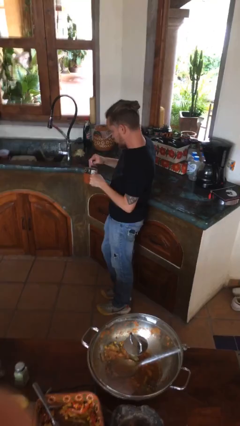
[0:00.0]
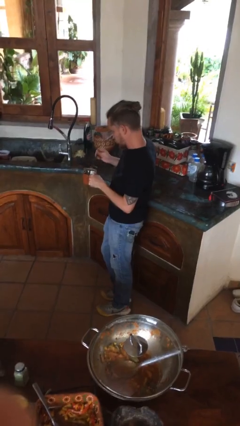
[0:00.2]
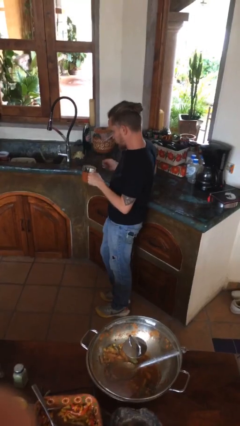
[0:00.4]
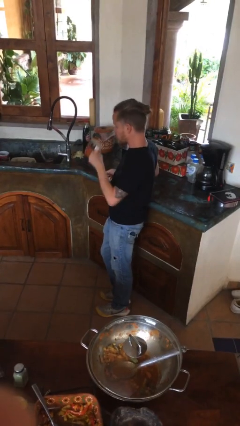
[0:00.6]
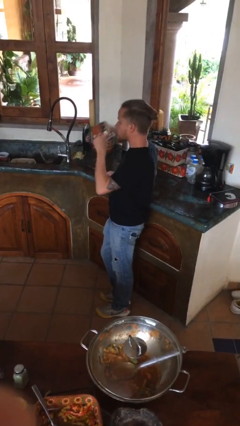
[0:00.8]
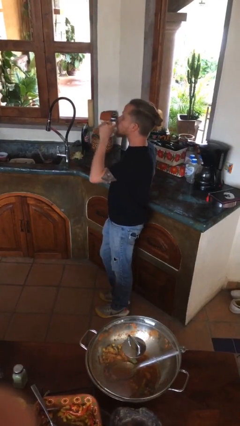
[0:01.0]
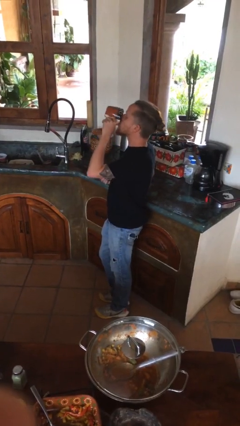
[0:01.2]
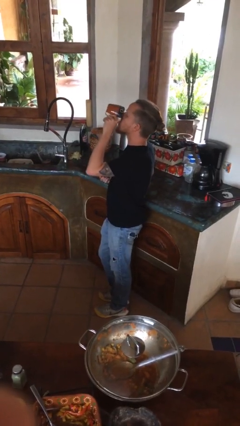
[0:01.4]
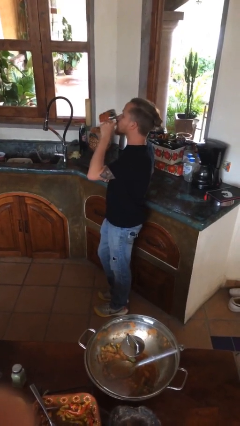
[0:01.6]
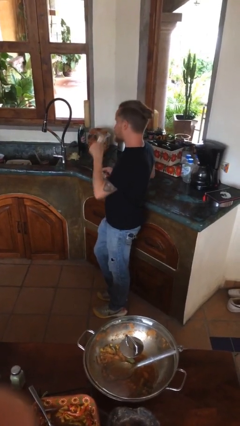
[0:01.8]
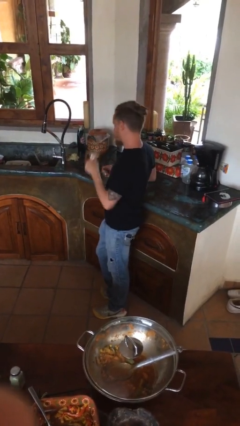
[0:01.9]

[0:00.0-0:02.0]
person drinks from mug

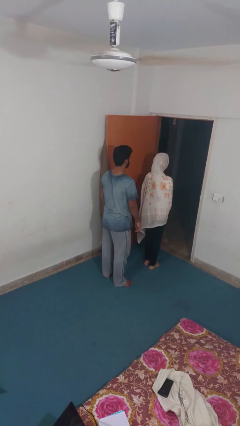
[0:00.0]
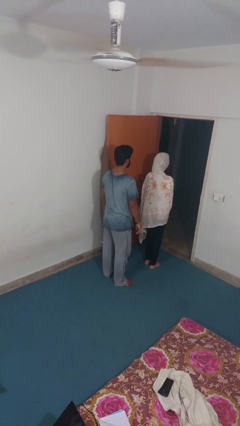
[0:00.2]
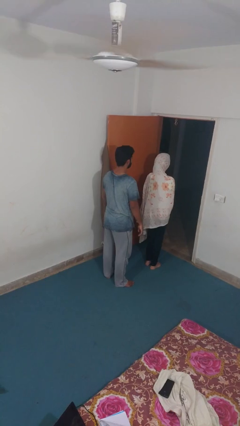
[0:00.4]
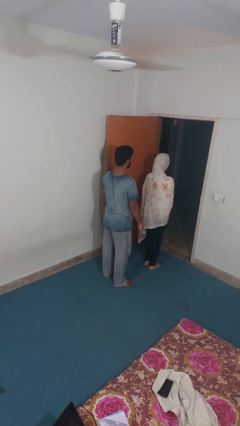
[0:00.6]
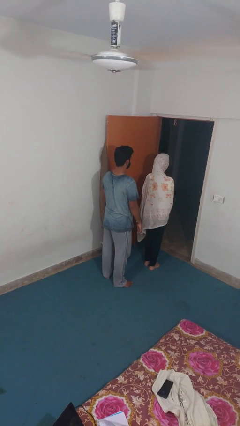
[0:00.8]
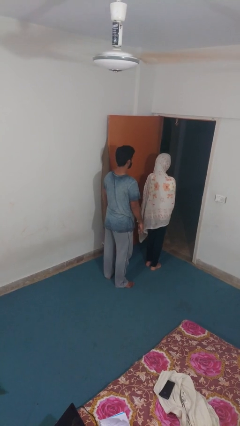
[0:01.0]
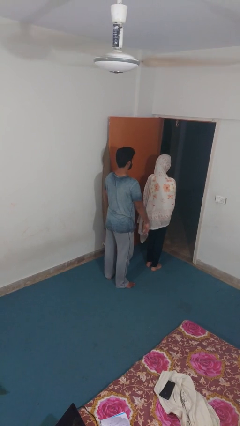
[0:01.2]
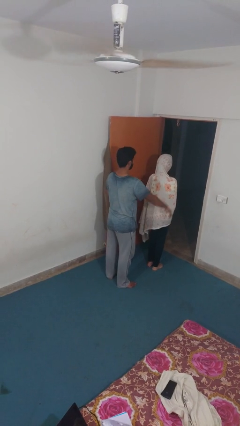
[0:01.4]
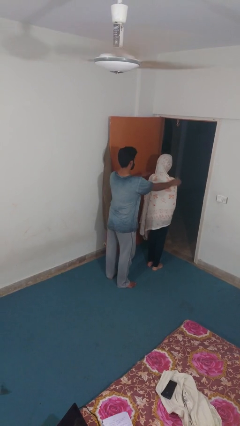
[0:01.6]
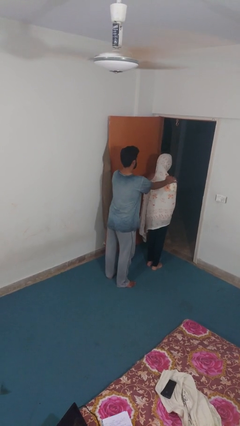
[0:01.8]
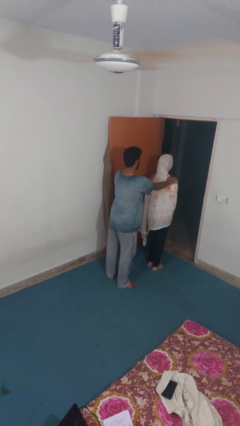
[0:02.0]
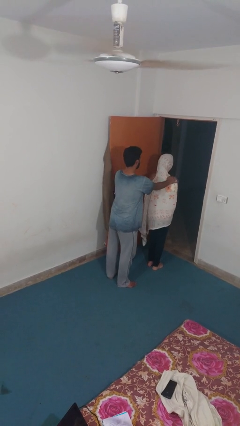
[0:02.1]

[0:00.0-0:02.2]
person grabs person by shoulder

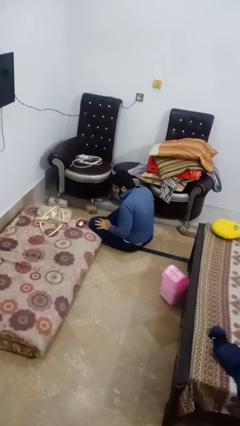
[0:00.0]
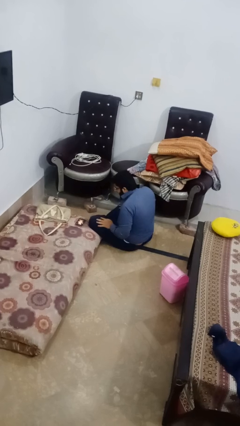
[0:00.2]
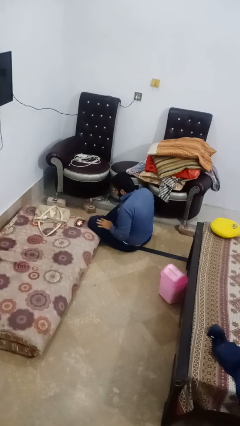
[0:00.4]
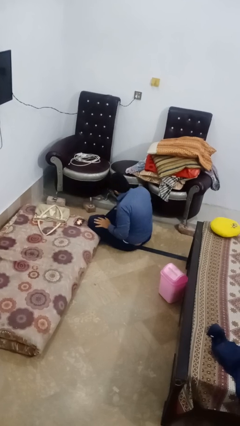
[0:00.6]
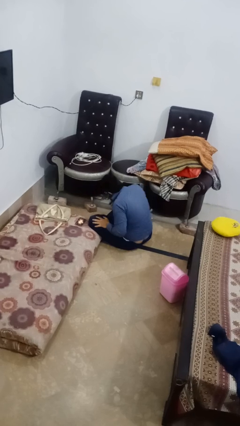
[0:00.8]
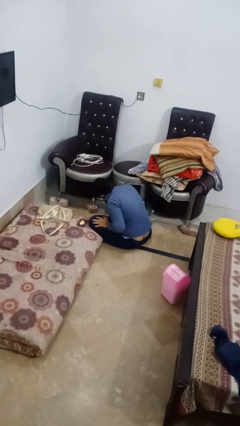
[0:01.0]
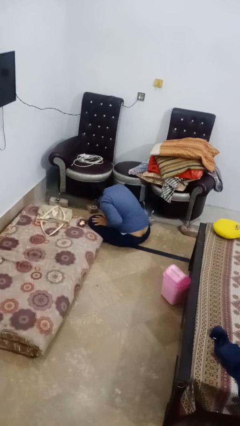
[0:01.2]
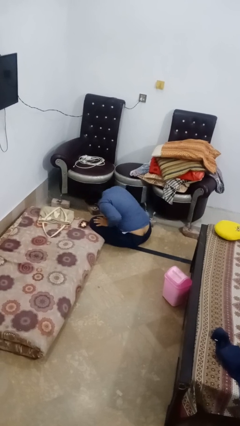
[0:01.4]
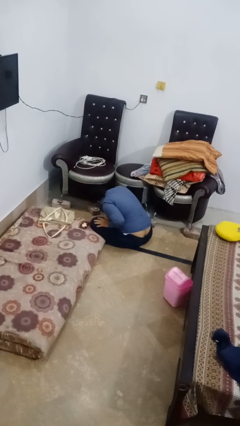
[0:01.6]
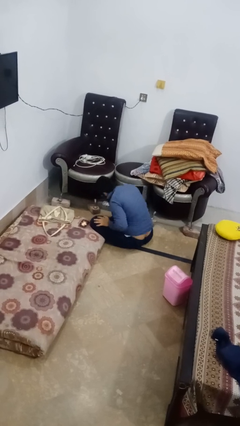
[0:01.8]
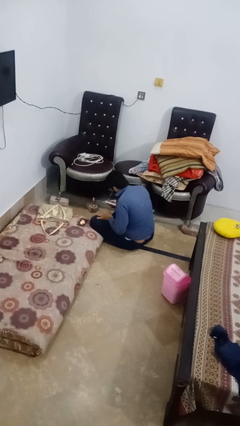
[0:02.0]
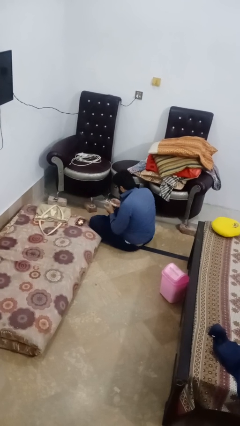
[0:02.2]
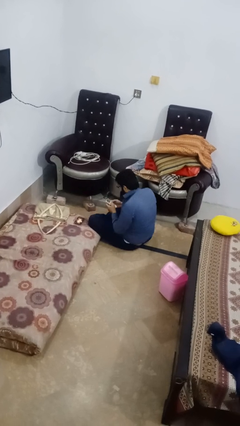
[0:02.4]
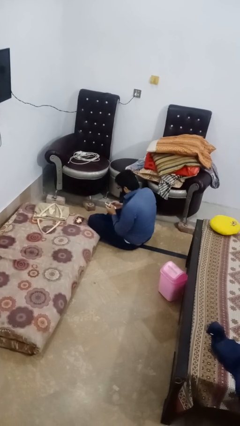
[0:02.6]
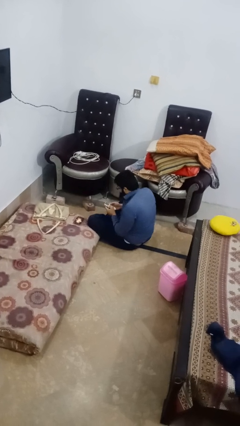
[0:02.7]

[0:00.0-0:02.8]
person searches under couch

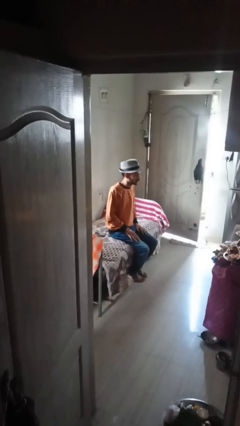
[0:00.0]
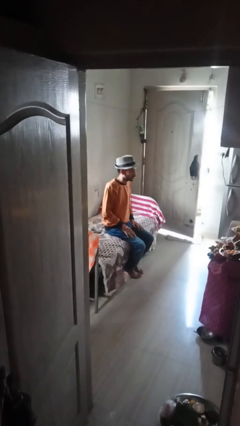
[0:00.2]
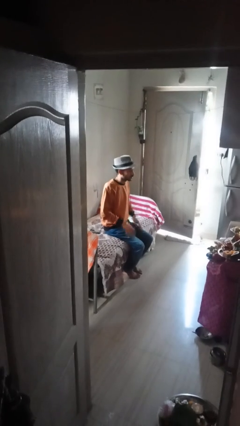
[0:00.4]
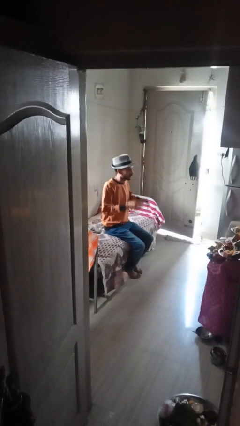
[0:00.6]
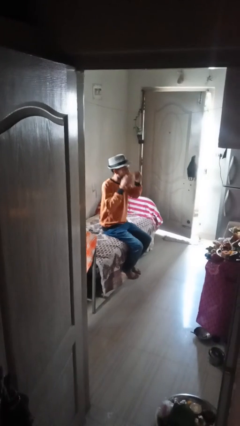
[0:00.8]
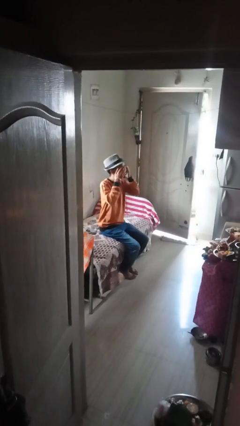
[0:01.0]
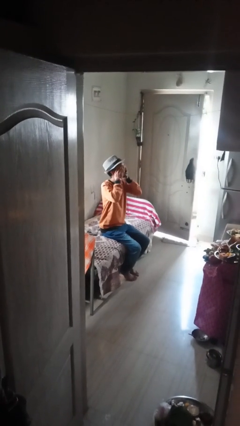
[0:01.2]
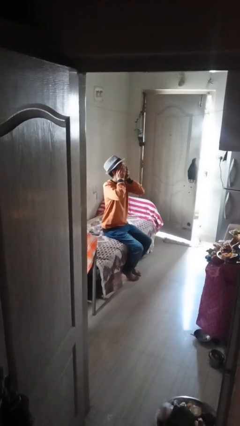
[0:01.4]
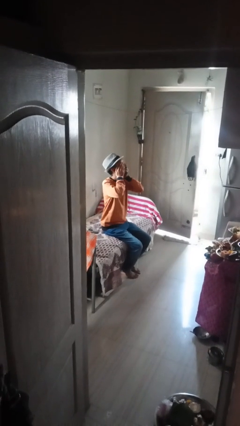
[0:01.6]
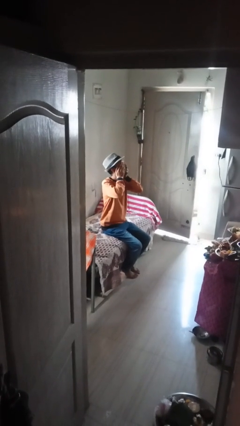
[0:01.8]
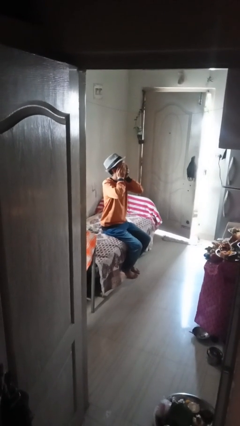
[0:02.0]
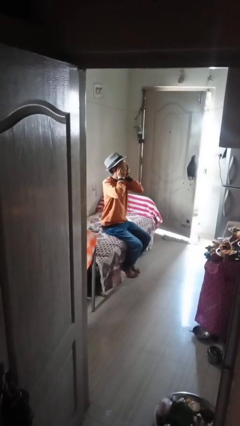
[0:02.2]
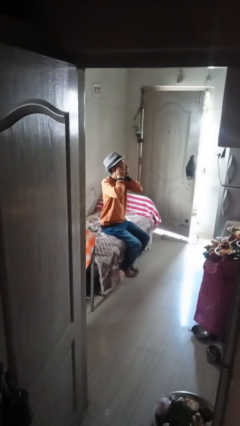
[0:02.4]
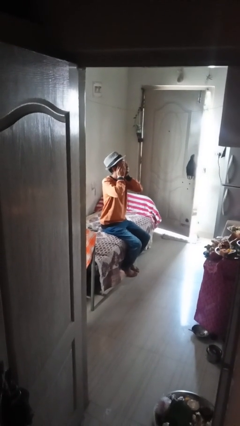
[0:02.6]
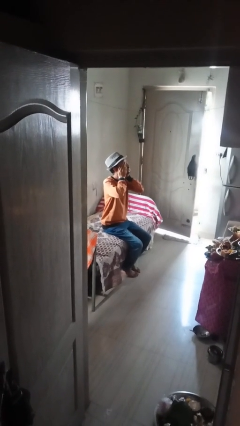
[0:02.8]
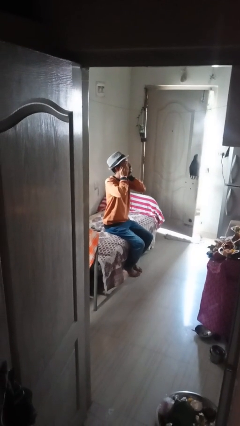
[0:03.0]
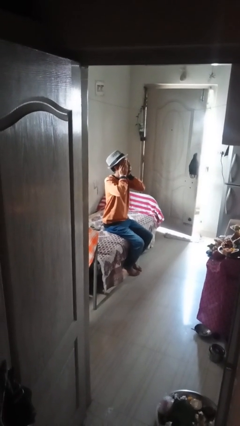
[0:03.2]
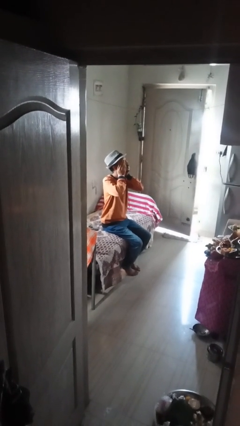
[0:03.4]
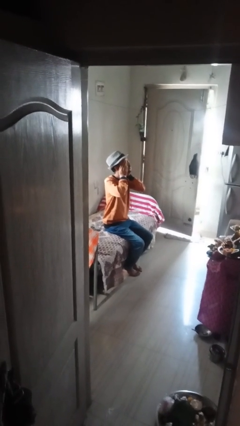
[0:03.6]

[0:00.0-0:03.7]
person covers face with hands

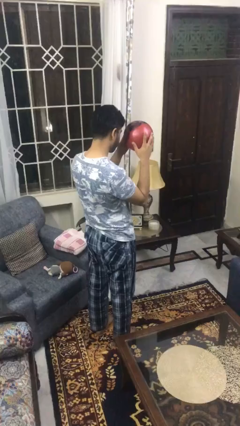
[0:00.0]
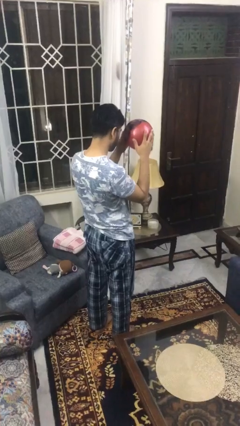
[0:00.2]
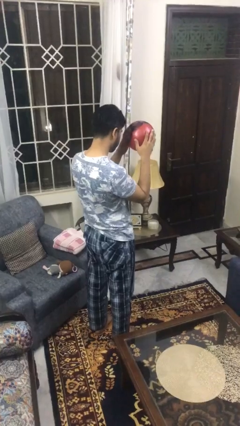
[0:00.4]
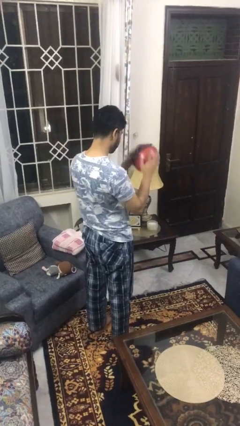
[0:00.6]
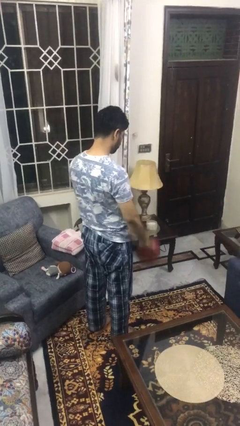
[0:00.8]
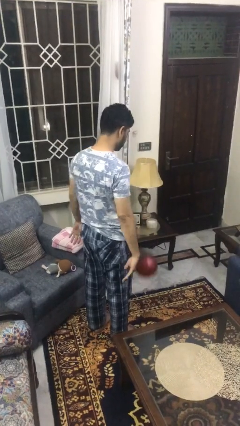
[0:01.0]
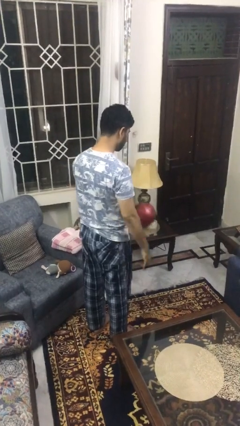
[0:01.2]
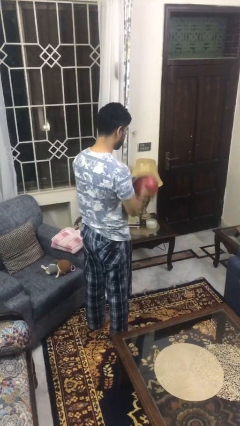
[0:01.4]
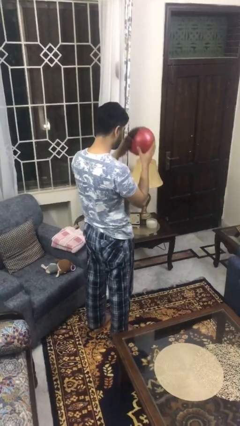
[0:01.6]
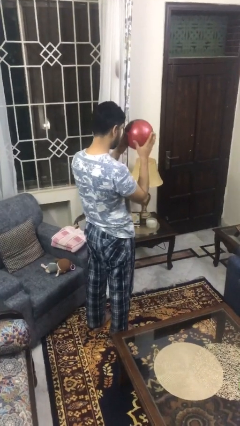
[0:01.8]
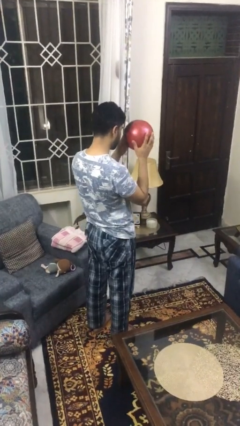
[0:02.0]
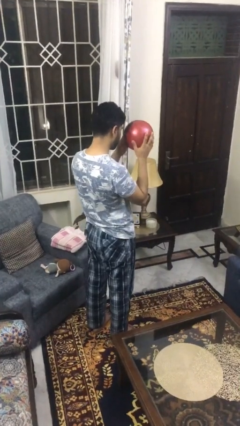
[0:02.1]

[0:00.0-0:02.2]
person bounces ball on floor

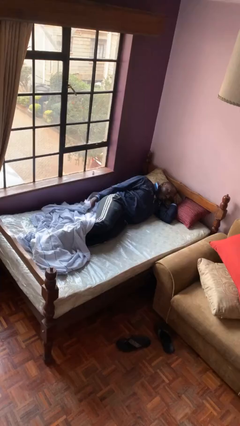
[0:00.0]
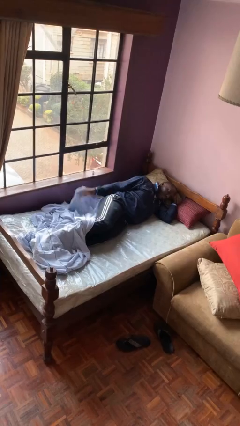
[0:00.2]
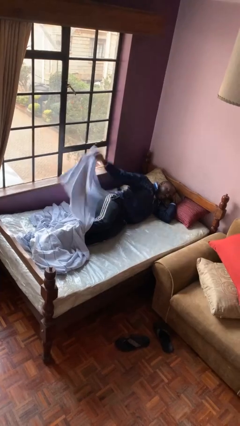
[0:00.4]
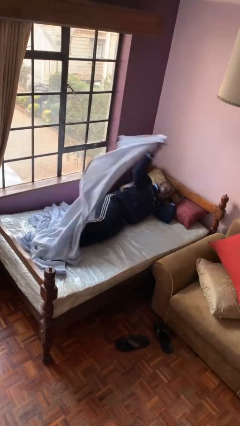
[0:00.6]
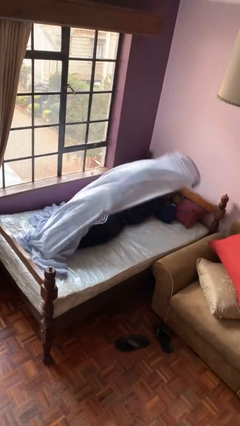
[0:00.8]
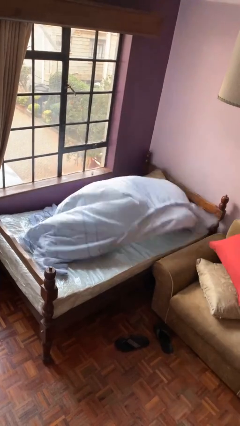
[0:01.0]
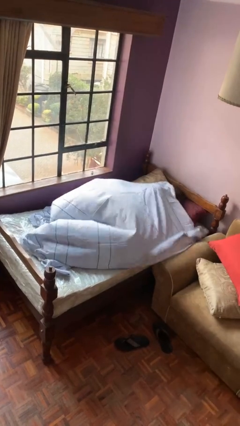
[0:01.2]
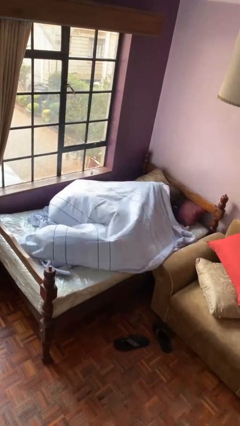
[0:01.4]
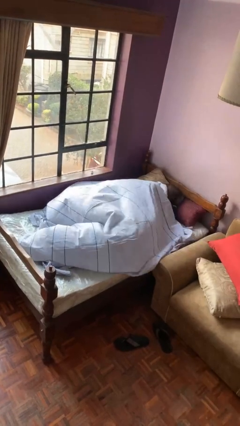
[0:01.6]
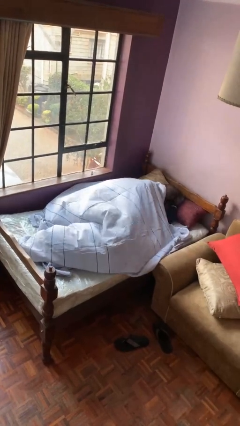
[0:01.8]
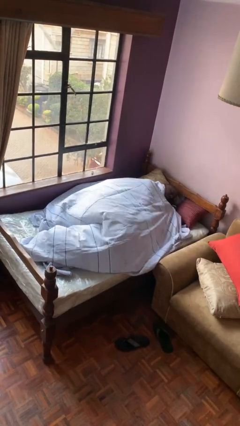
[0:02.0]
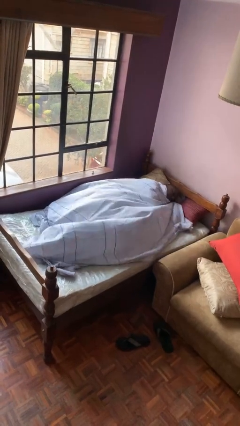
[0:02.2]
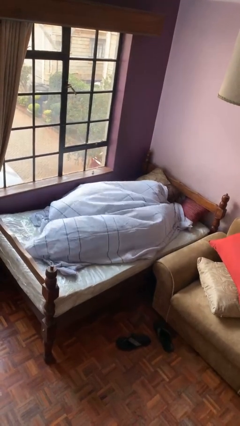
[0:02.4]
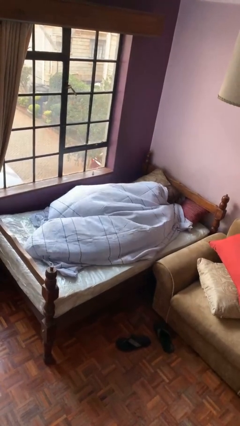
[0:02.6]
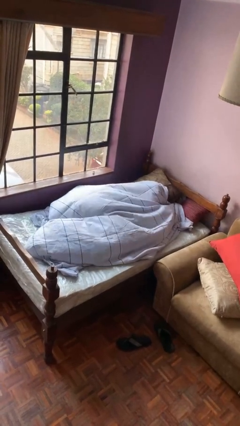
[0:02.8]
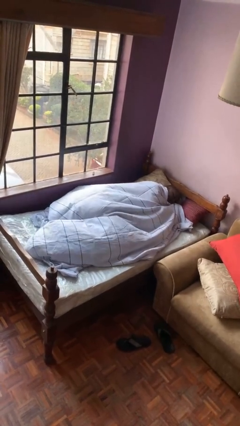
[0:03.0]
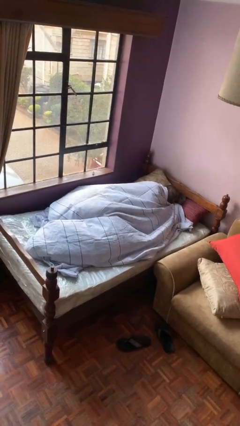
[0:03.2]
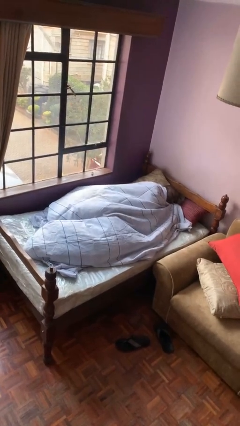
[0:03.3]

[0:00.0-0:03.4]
person covers with bedsheets

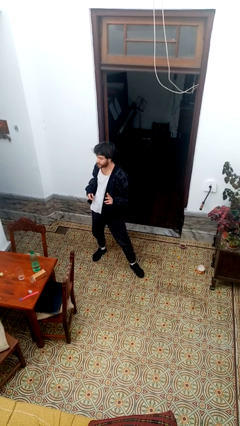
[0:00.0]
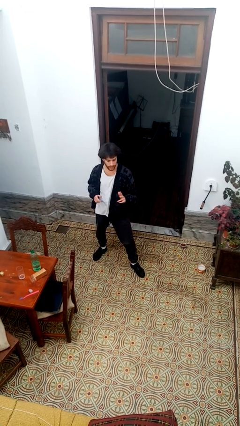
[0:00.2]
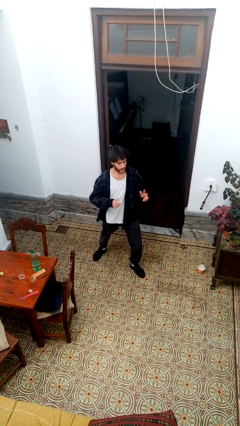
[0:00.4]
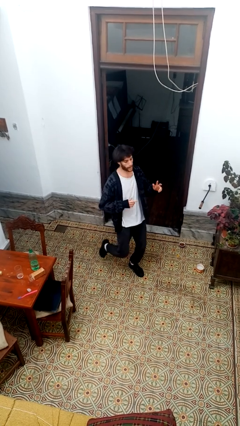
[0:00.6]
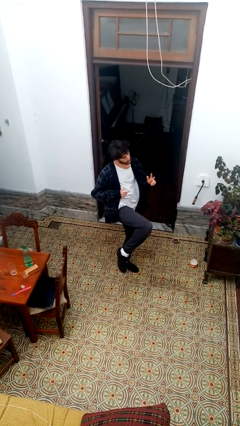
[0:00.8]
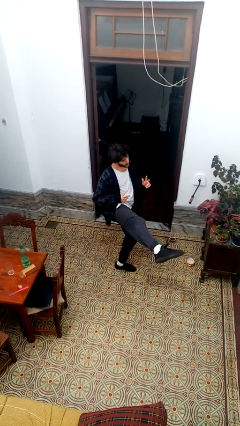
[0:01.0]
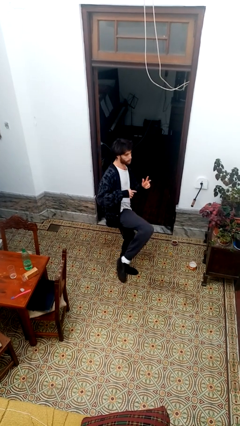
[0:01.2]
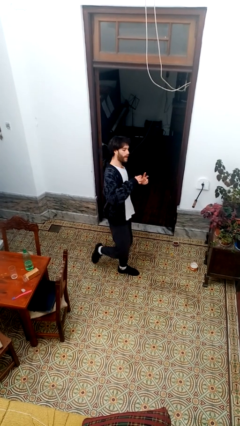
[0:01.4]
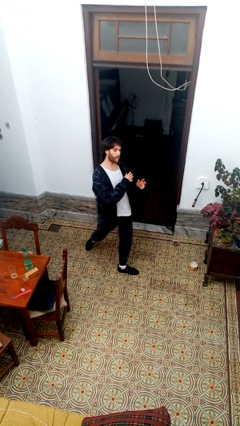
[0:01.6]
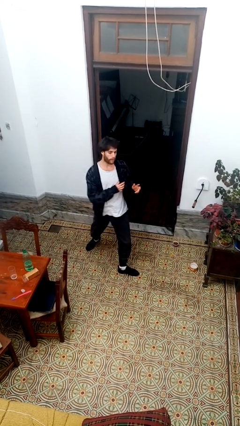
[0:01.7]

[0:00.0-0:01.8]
person karate kicks
